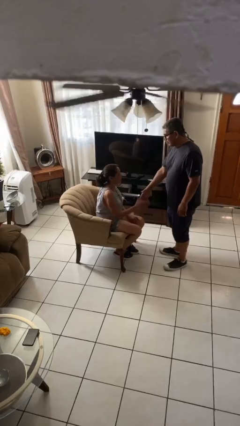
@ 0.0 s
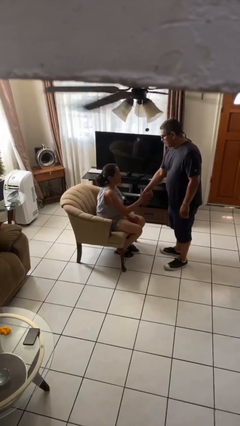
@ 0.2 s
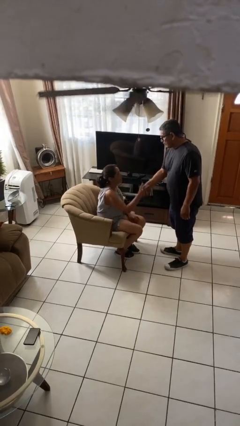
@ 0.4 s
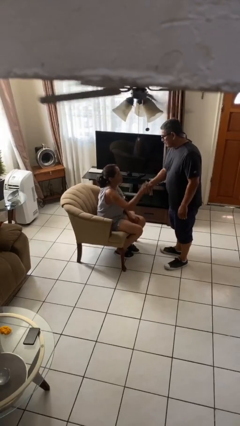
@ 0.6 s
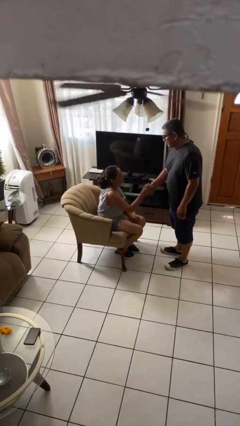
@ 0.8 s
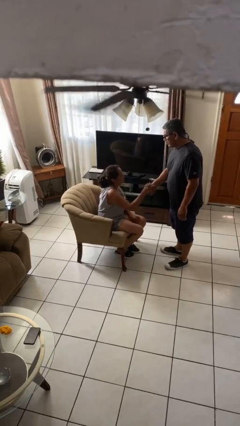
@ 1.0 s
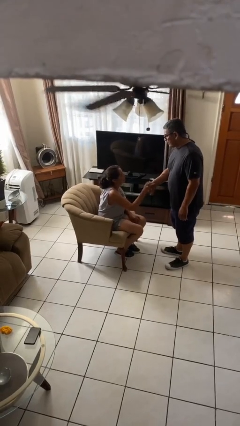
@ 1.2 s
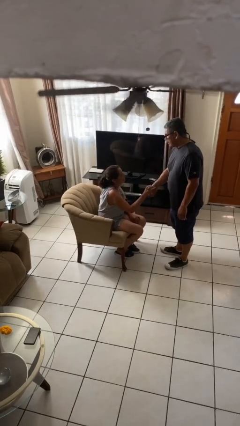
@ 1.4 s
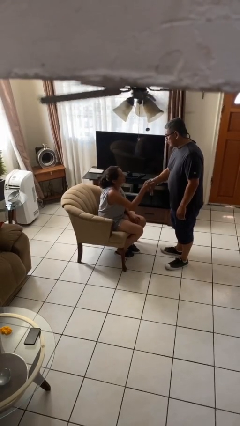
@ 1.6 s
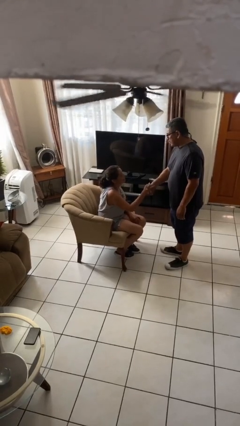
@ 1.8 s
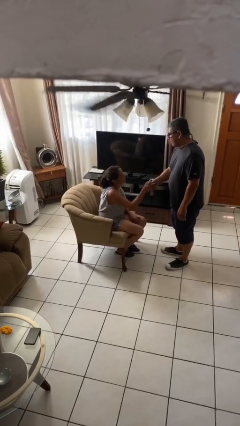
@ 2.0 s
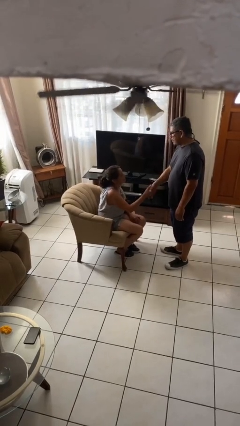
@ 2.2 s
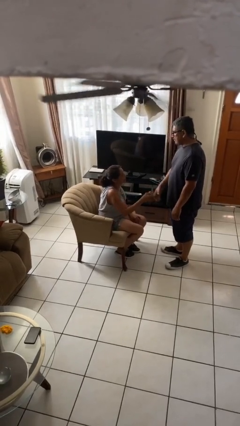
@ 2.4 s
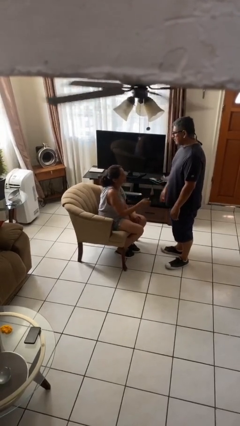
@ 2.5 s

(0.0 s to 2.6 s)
person shakes hand

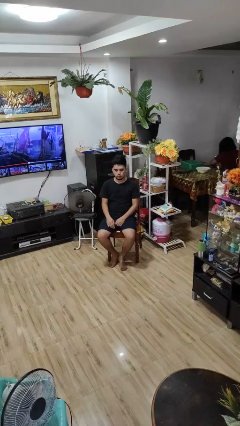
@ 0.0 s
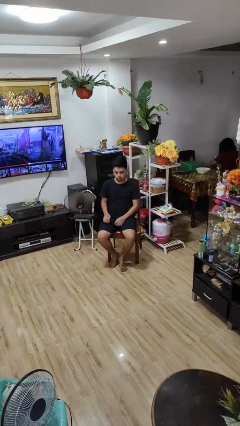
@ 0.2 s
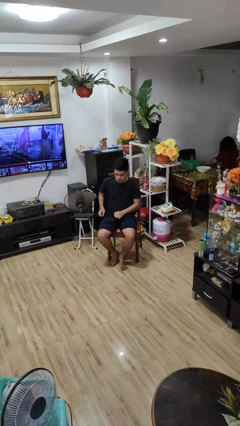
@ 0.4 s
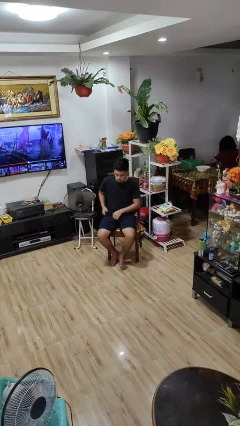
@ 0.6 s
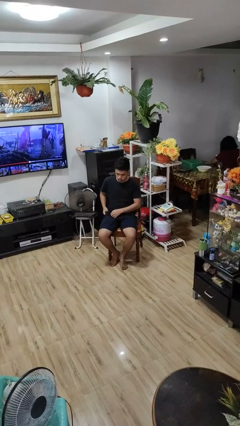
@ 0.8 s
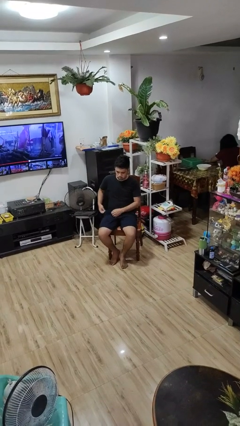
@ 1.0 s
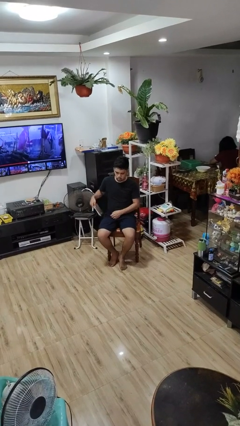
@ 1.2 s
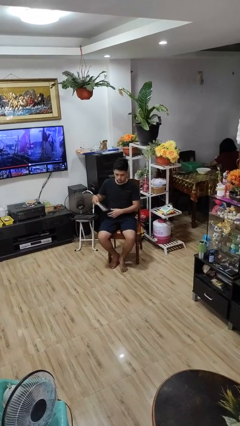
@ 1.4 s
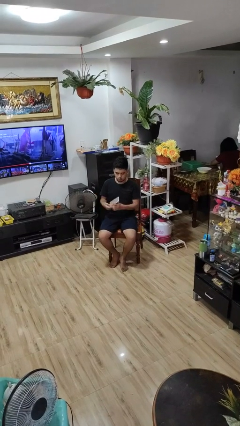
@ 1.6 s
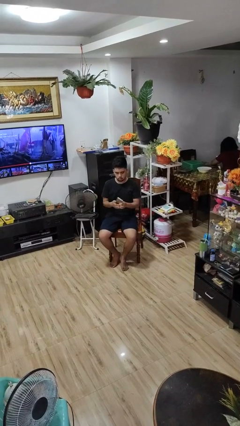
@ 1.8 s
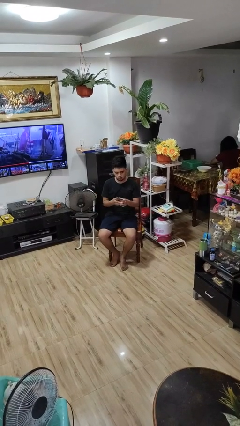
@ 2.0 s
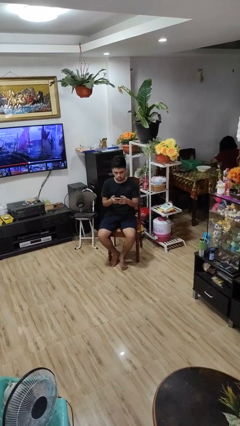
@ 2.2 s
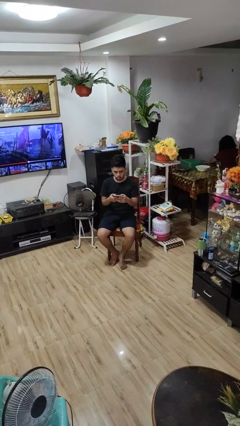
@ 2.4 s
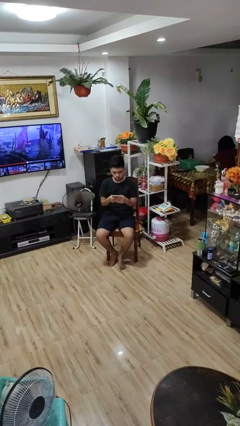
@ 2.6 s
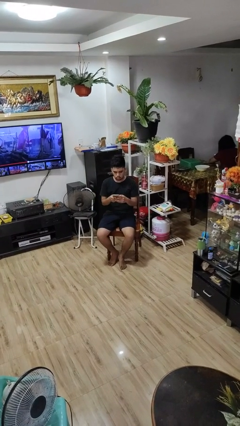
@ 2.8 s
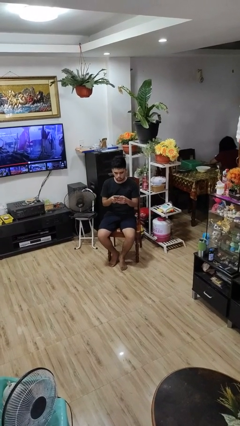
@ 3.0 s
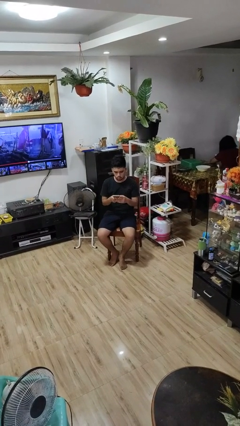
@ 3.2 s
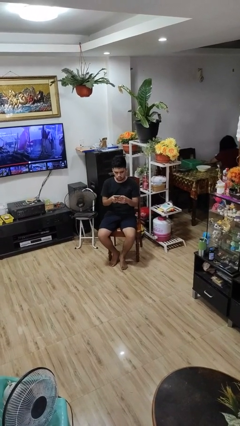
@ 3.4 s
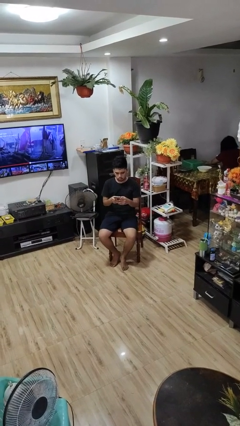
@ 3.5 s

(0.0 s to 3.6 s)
person takes phone from pocket

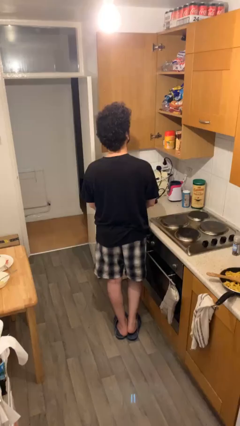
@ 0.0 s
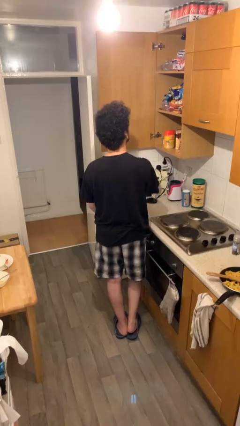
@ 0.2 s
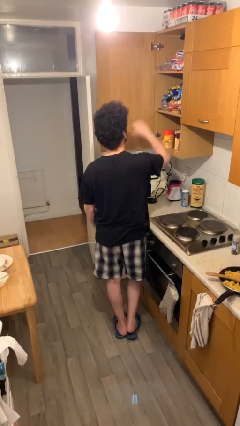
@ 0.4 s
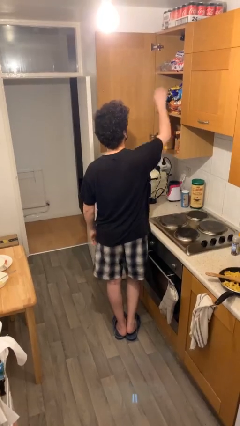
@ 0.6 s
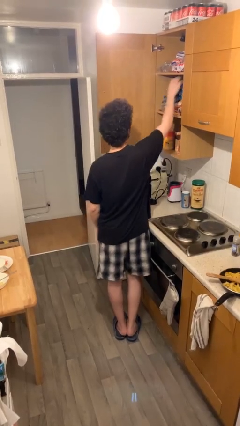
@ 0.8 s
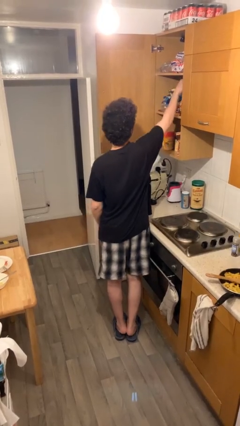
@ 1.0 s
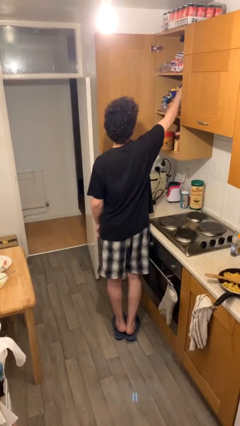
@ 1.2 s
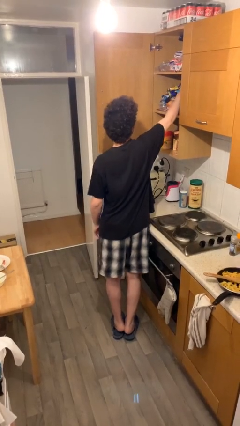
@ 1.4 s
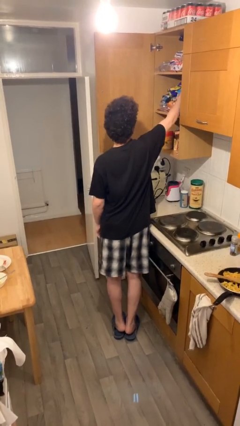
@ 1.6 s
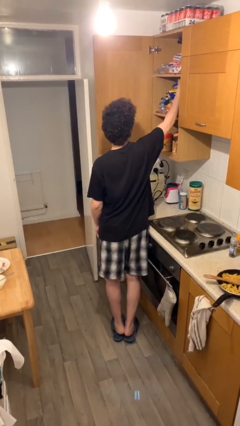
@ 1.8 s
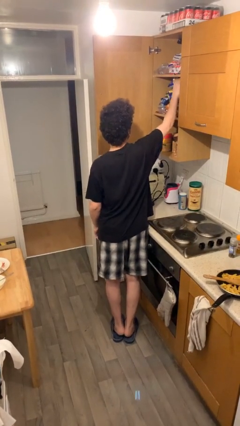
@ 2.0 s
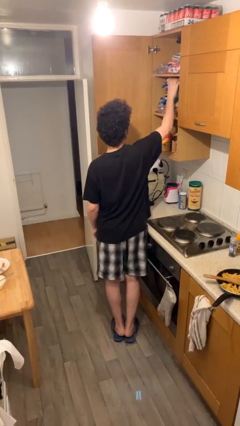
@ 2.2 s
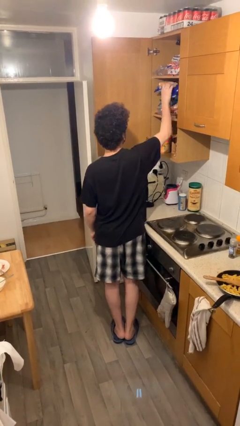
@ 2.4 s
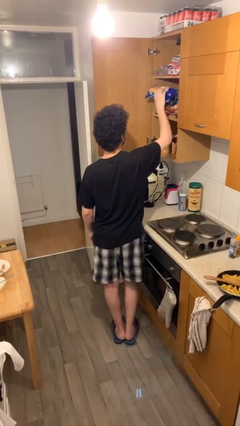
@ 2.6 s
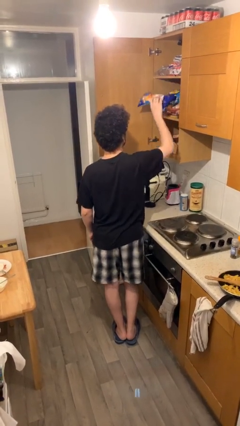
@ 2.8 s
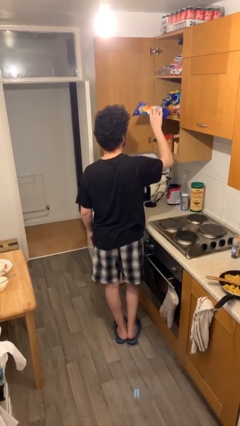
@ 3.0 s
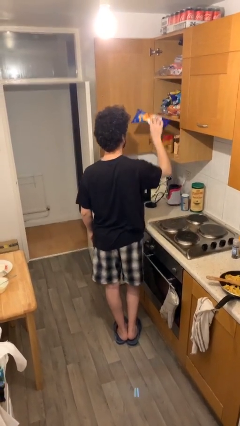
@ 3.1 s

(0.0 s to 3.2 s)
person picks up object from shelf

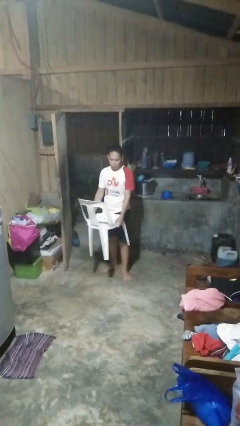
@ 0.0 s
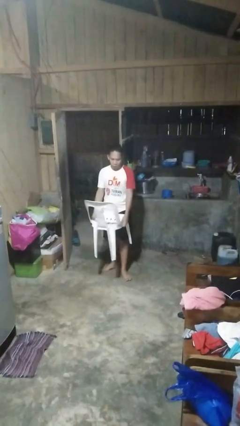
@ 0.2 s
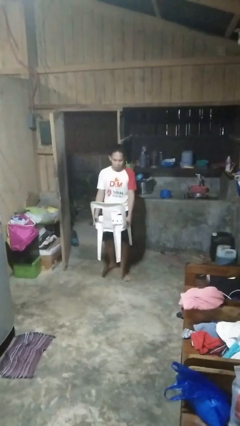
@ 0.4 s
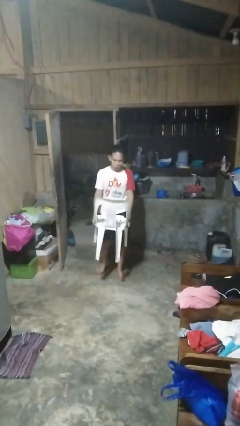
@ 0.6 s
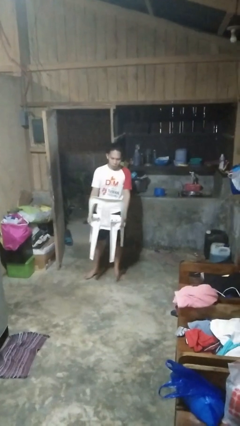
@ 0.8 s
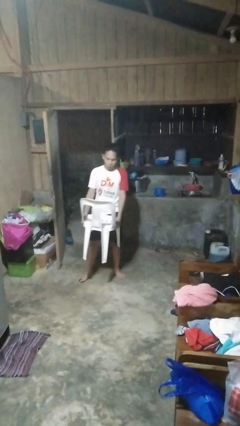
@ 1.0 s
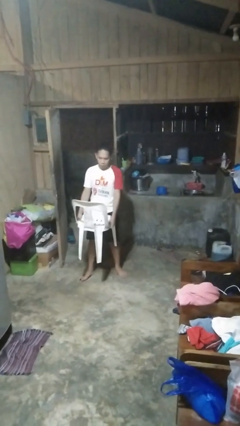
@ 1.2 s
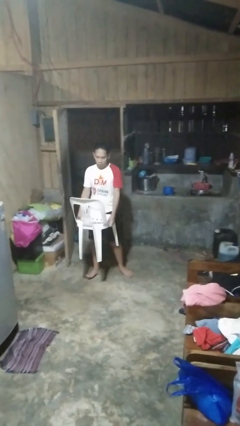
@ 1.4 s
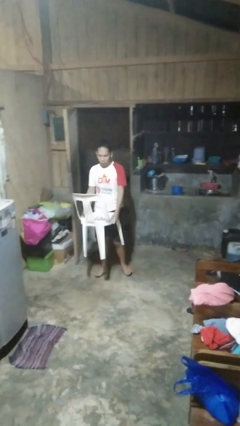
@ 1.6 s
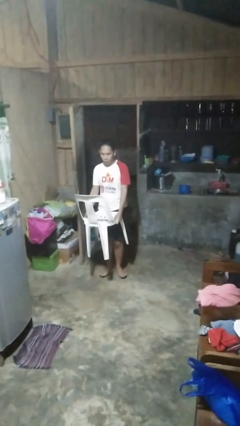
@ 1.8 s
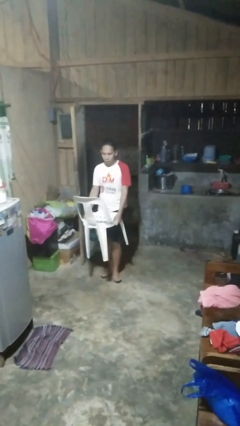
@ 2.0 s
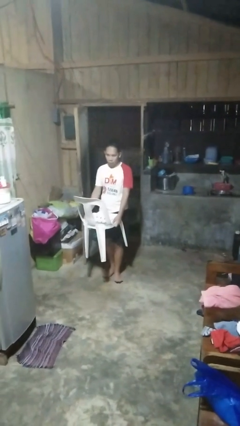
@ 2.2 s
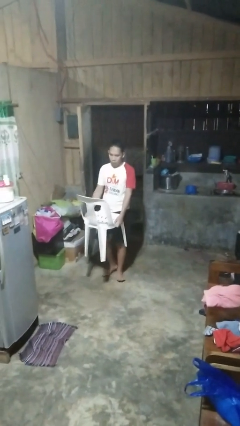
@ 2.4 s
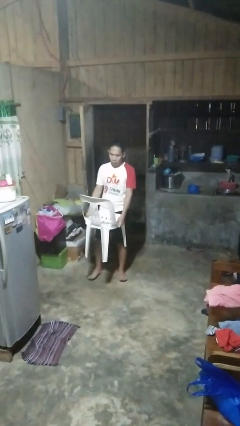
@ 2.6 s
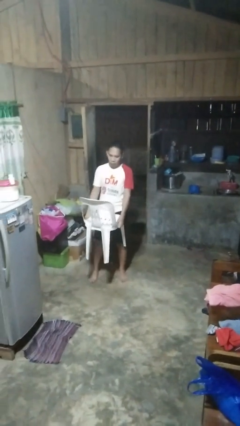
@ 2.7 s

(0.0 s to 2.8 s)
person carries furniture

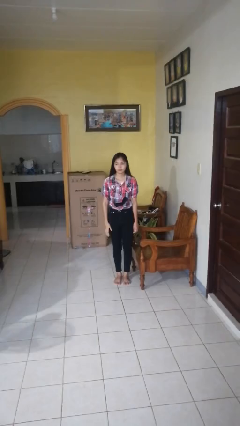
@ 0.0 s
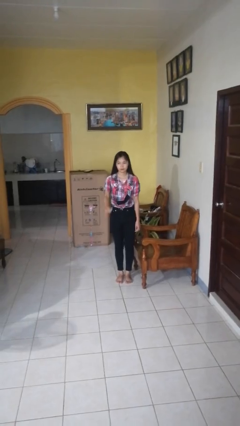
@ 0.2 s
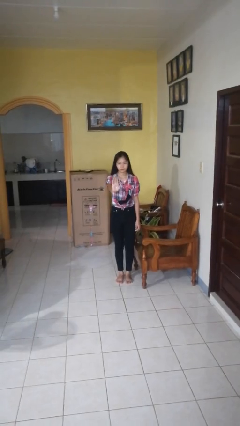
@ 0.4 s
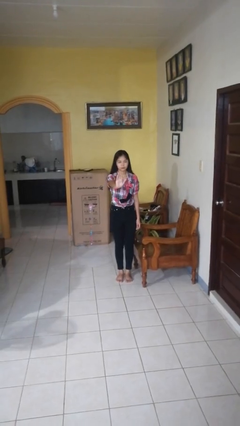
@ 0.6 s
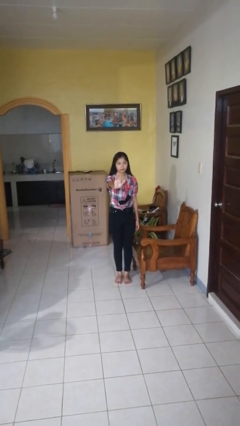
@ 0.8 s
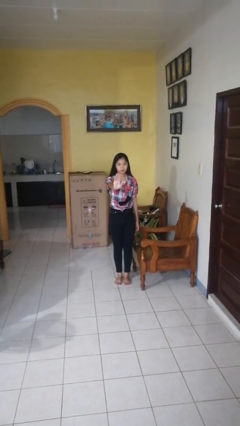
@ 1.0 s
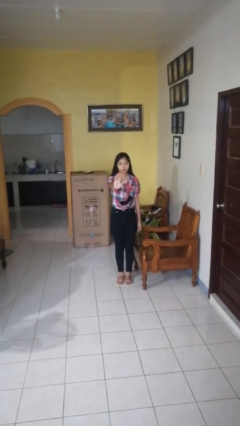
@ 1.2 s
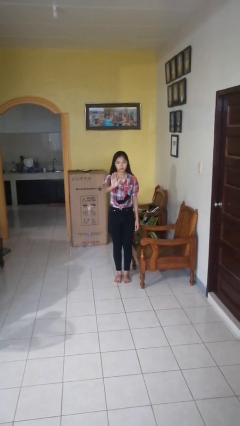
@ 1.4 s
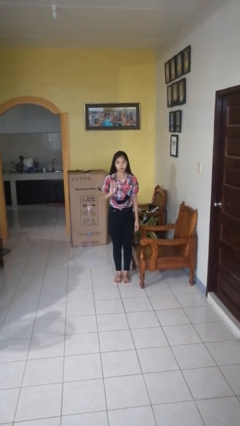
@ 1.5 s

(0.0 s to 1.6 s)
person gestures stop

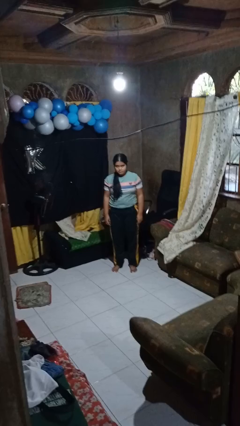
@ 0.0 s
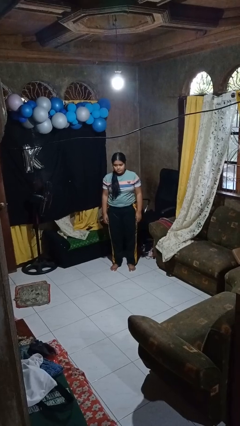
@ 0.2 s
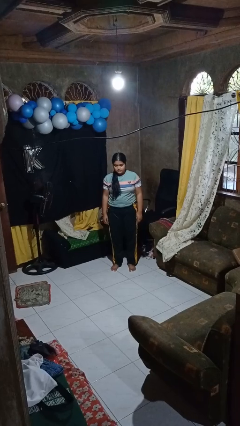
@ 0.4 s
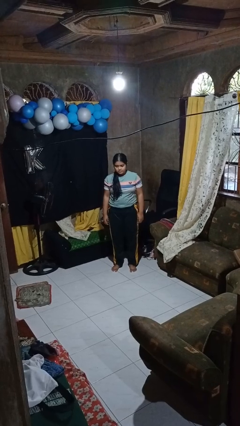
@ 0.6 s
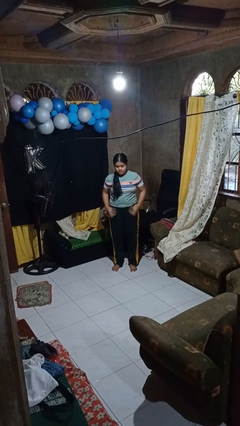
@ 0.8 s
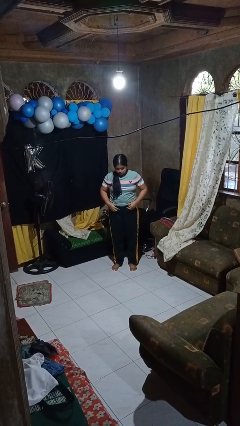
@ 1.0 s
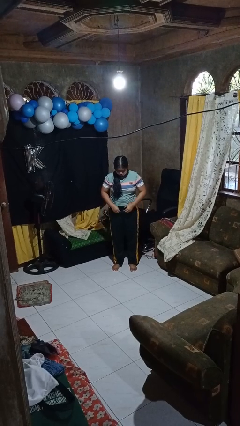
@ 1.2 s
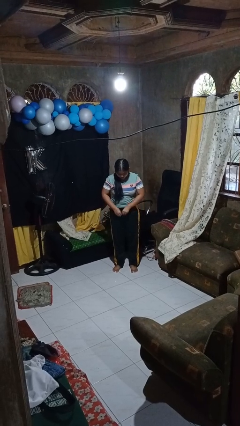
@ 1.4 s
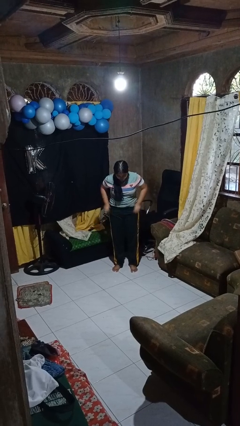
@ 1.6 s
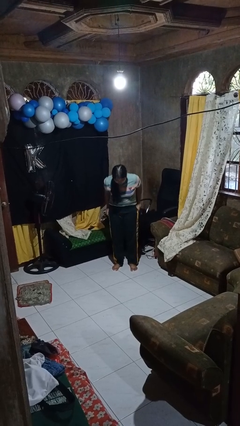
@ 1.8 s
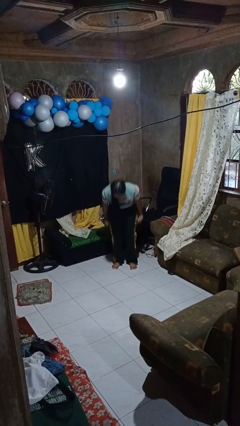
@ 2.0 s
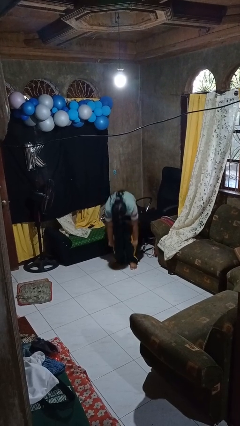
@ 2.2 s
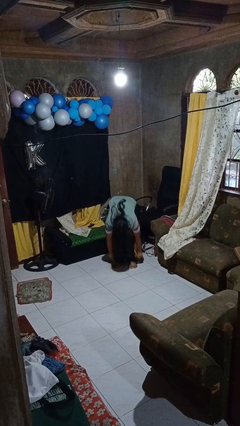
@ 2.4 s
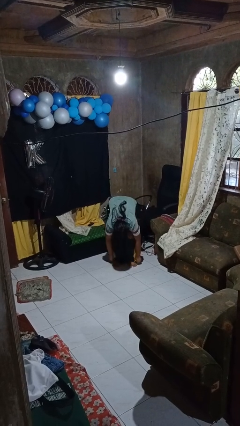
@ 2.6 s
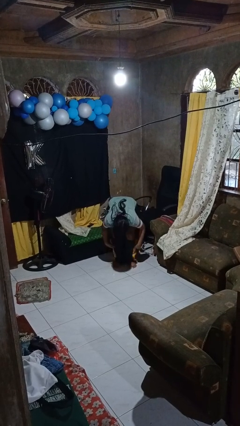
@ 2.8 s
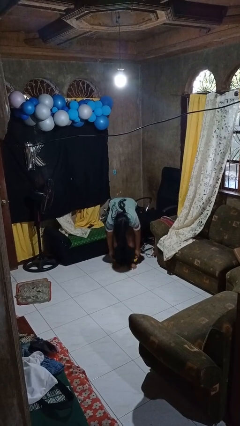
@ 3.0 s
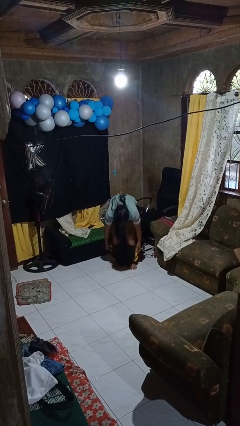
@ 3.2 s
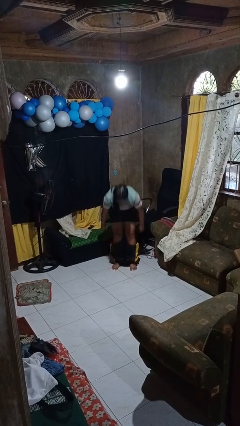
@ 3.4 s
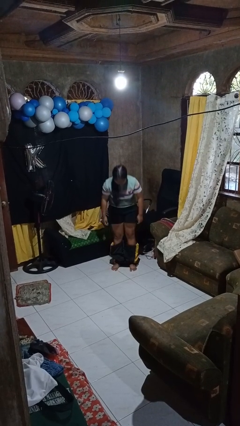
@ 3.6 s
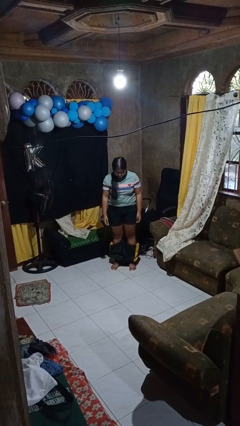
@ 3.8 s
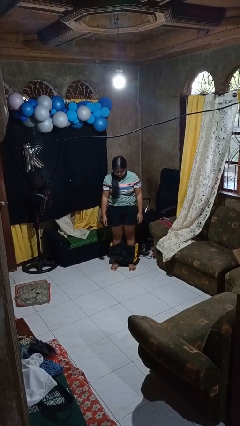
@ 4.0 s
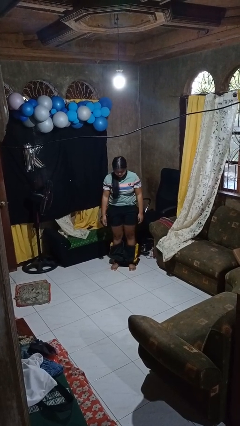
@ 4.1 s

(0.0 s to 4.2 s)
person takes off pants
